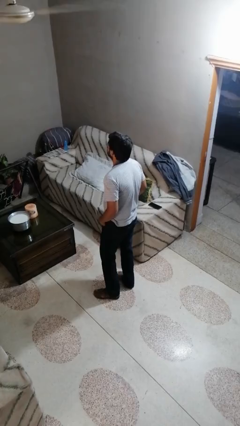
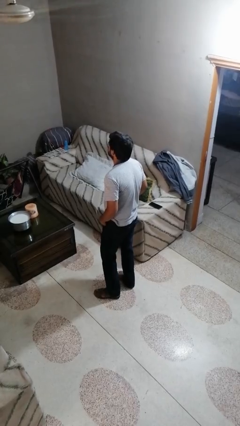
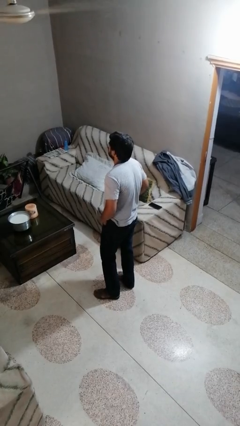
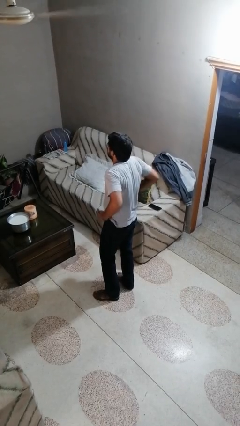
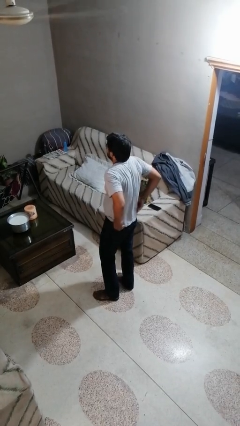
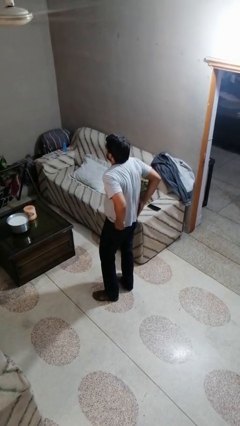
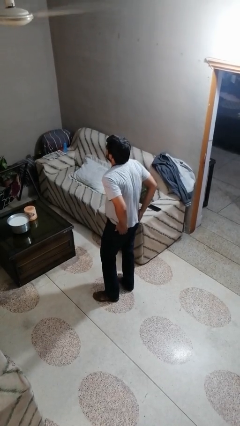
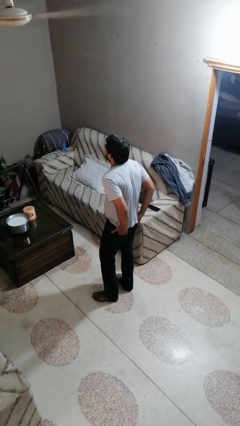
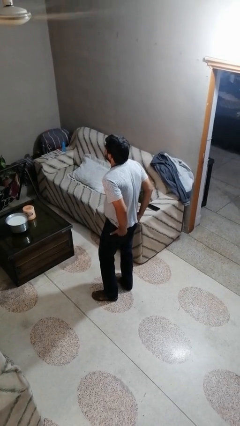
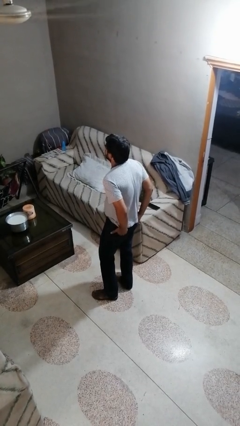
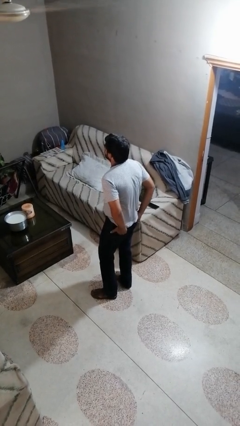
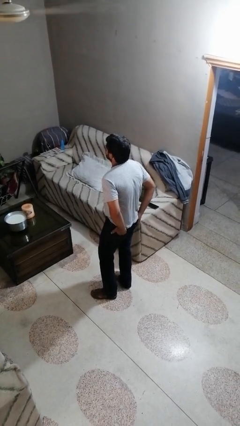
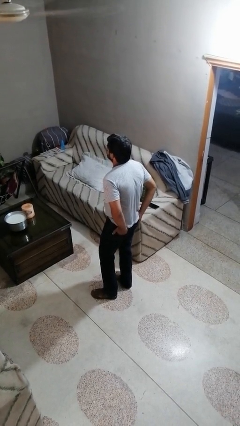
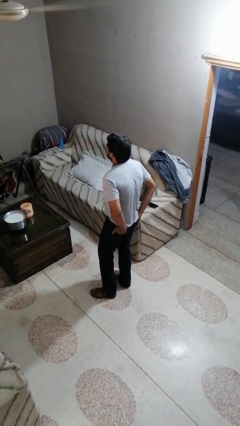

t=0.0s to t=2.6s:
person puts hands in back pockets

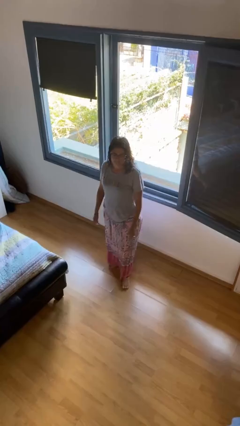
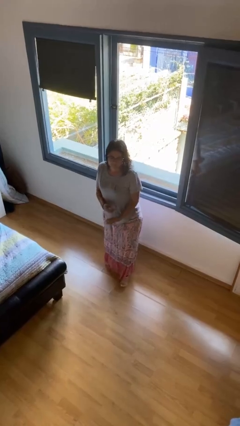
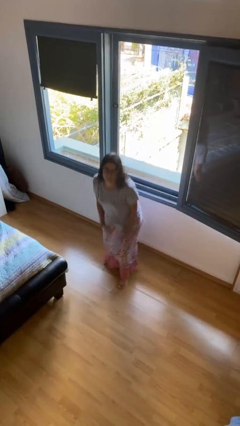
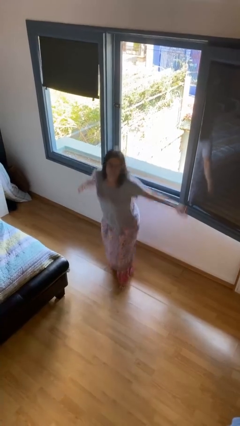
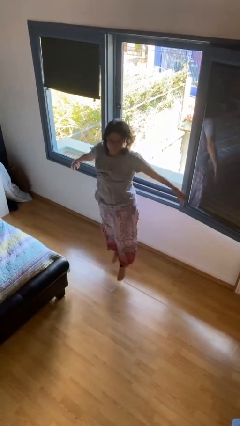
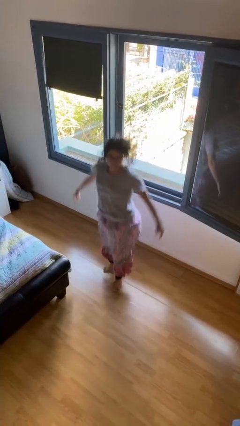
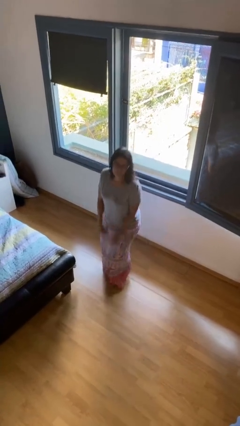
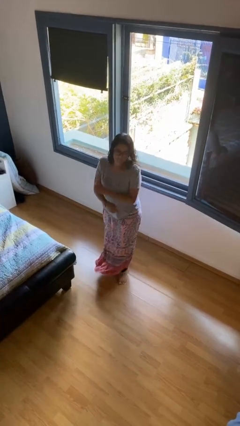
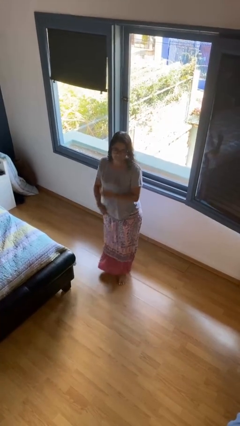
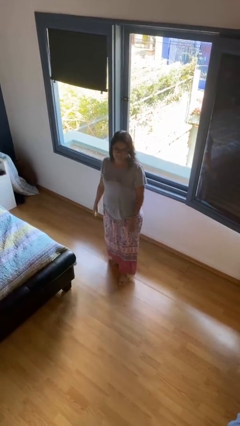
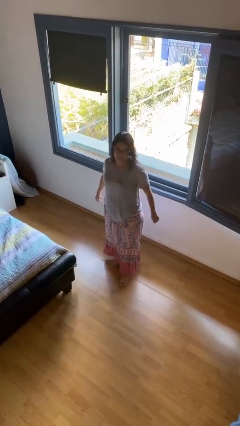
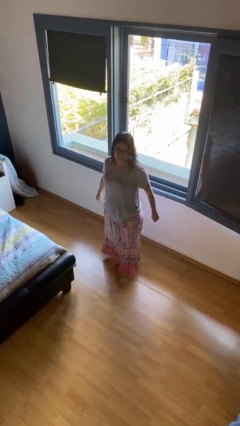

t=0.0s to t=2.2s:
person jumps

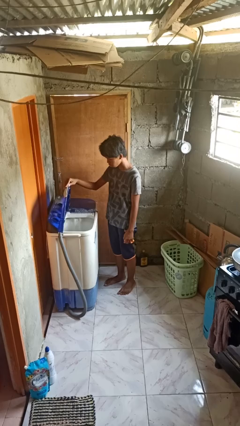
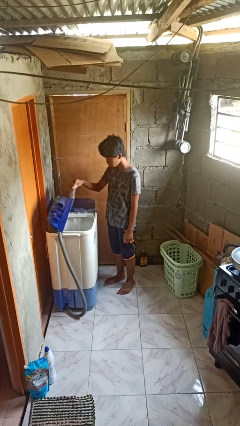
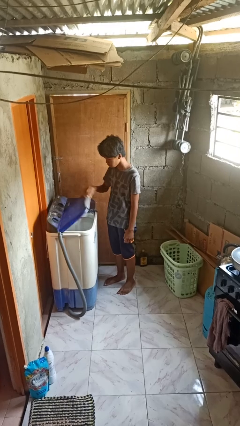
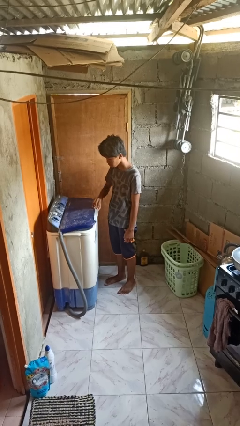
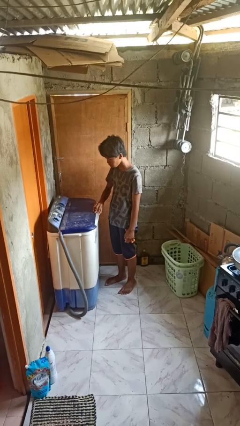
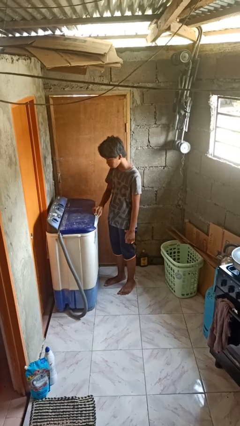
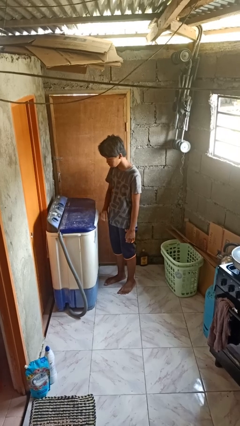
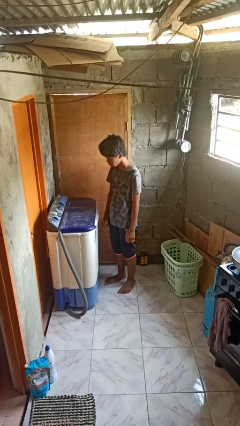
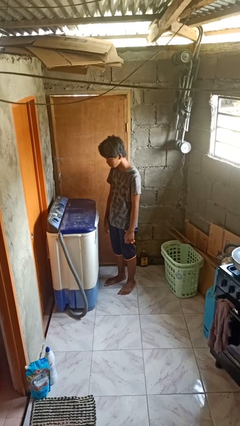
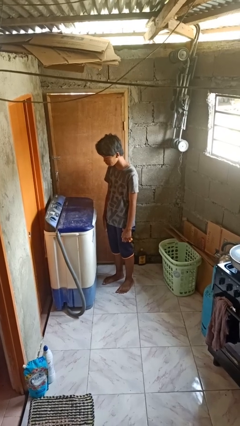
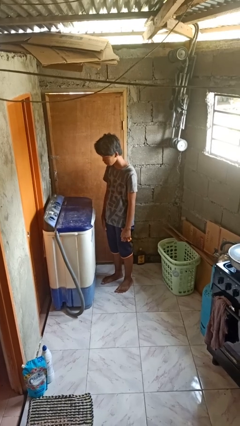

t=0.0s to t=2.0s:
person closes clothes washer

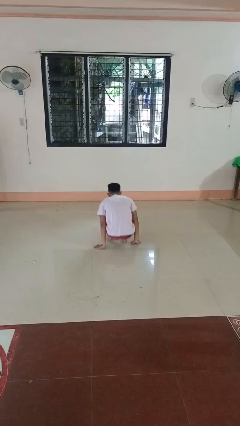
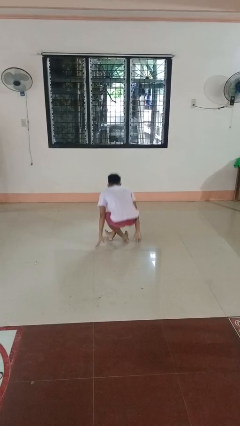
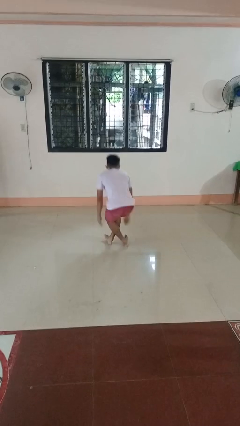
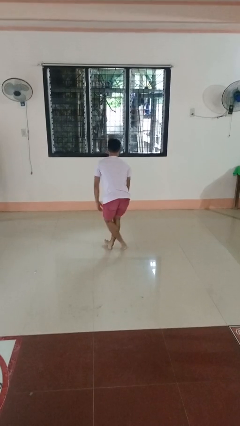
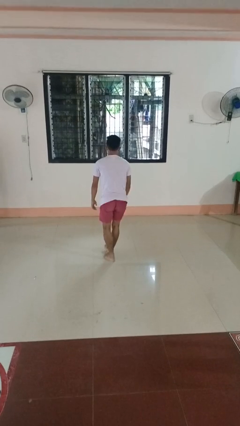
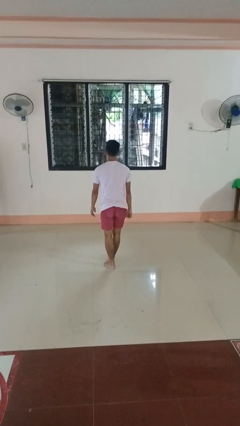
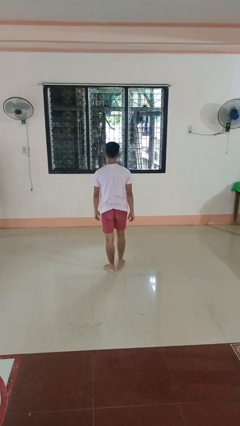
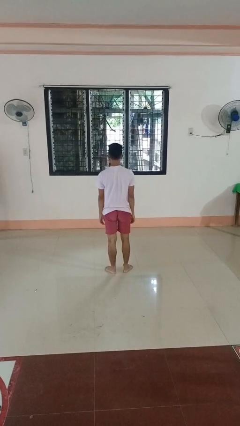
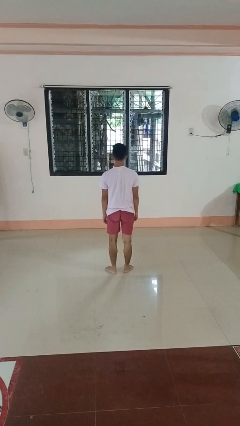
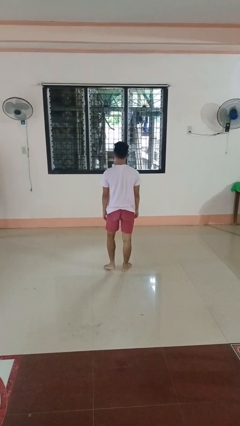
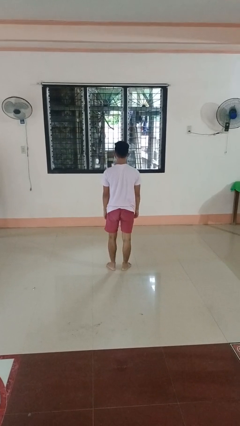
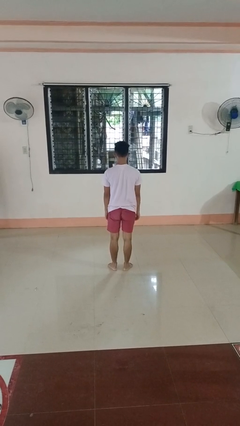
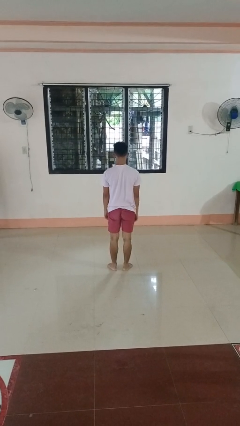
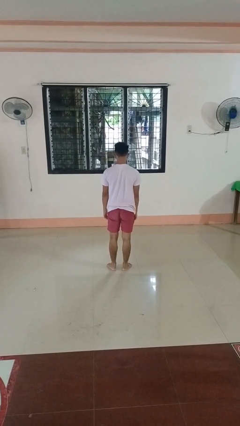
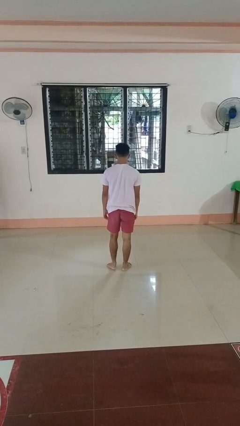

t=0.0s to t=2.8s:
person stands up from floor

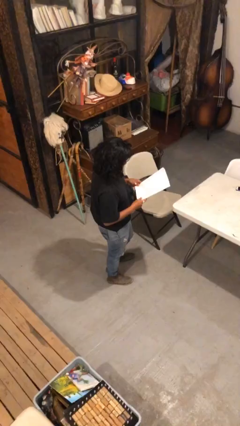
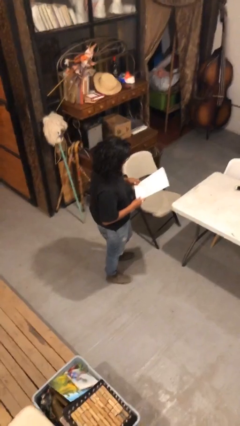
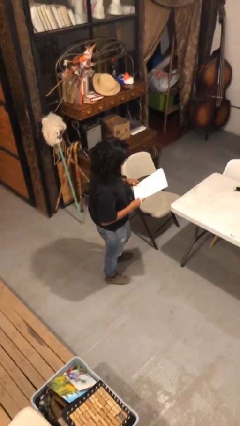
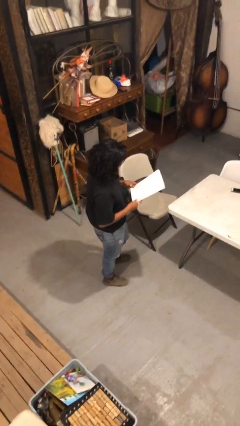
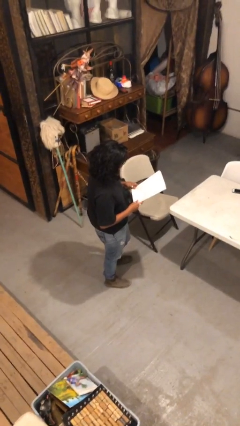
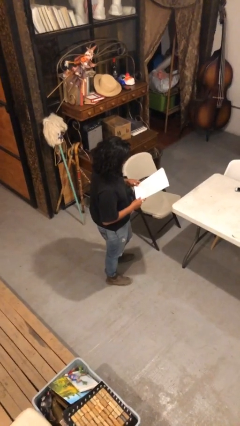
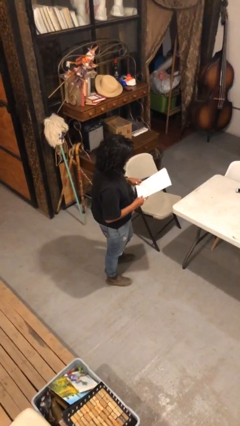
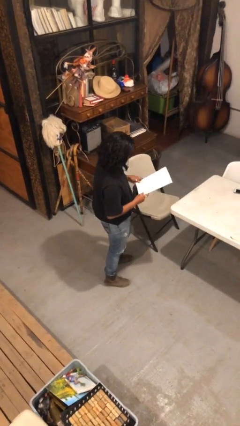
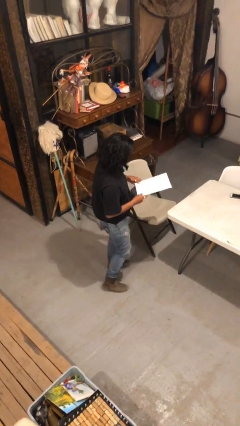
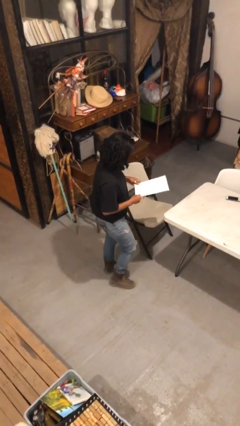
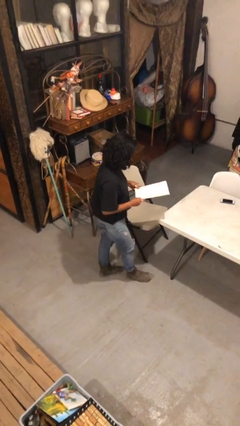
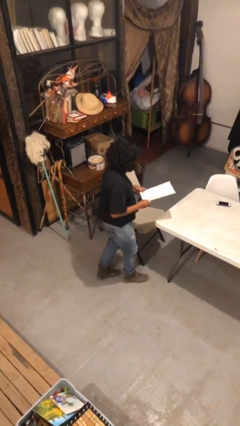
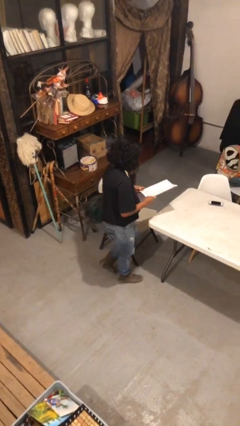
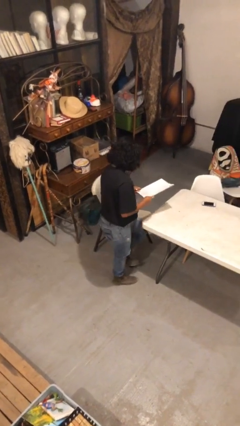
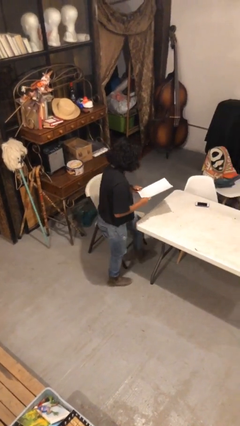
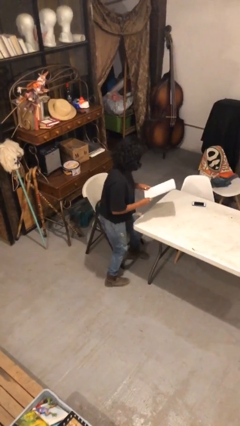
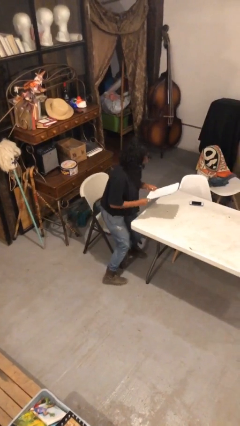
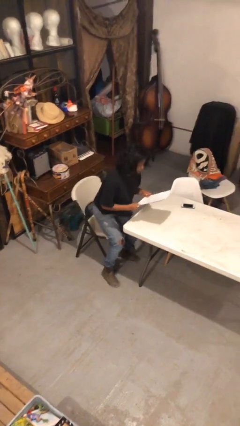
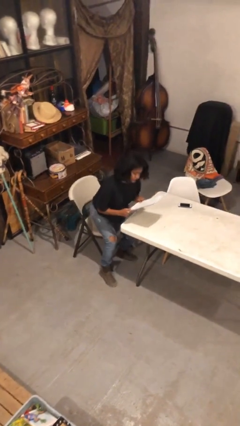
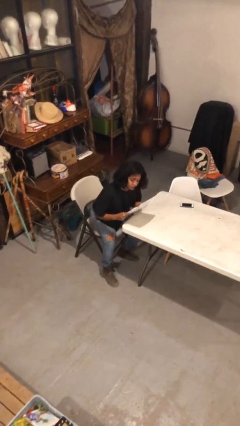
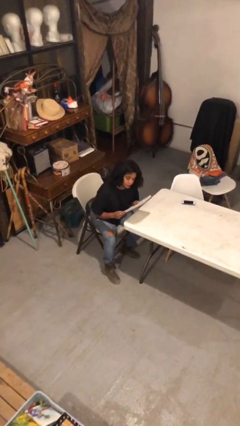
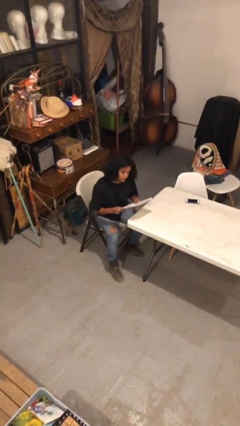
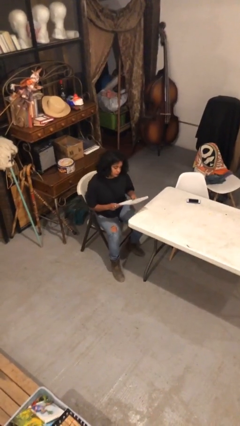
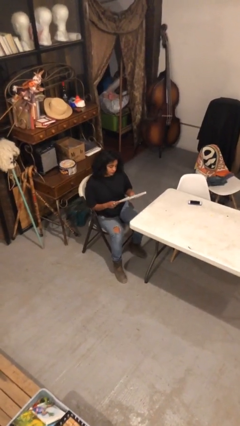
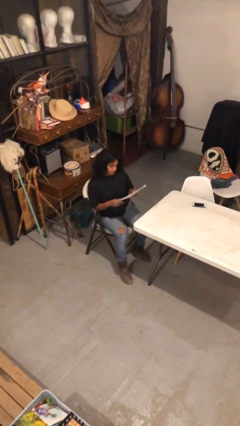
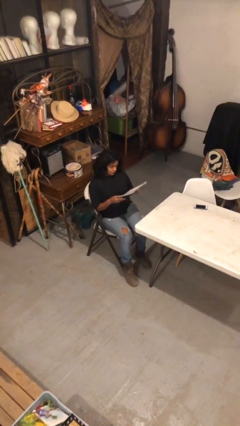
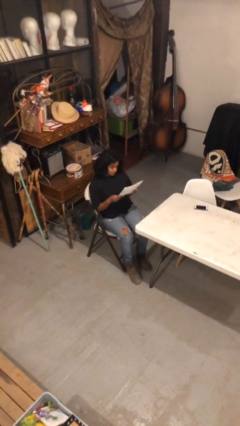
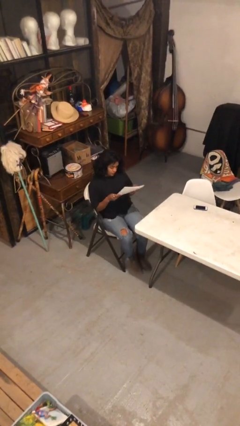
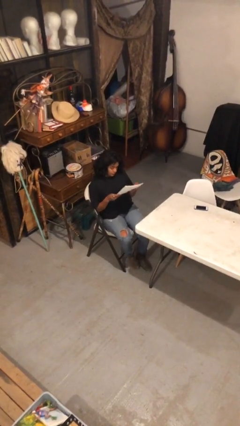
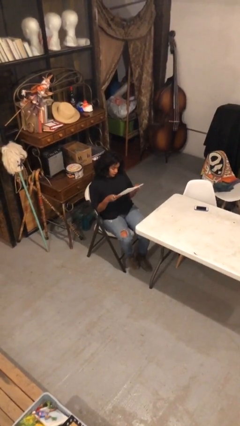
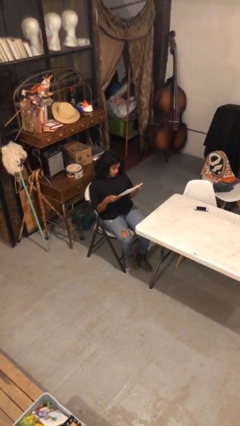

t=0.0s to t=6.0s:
person sits down

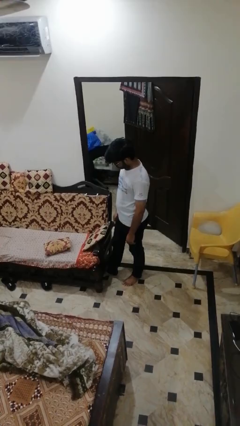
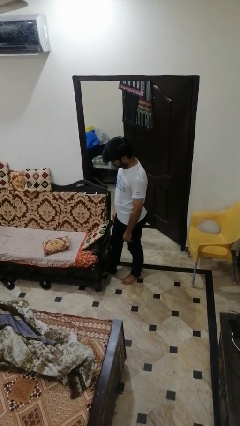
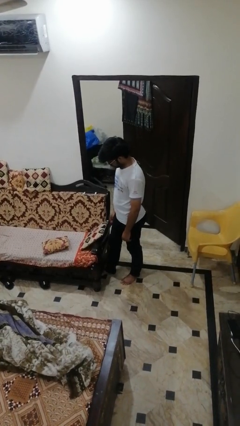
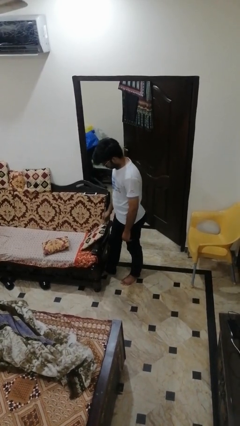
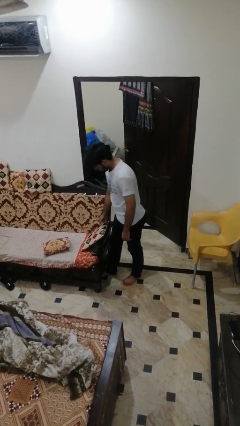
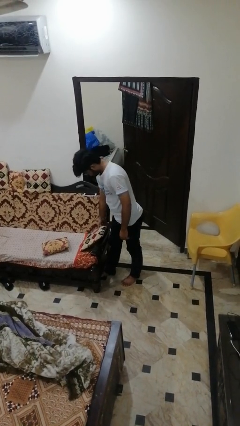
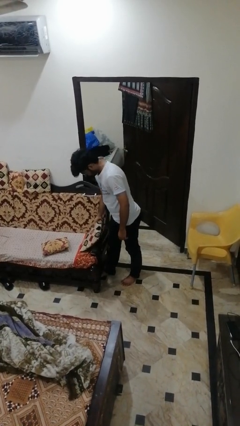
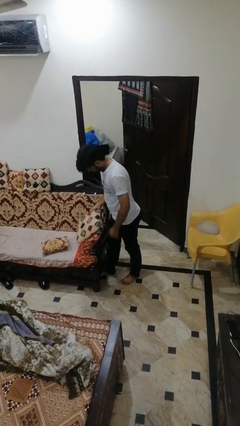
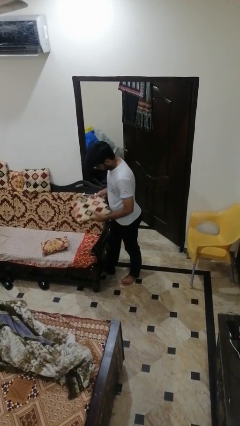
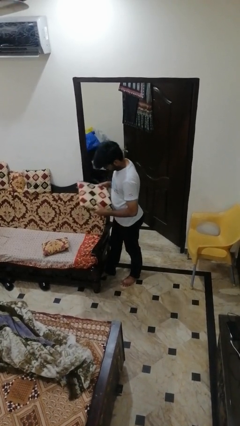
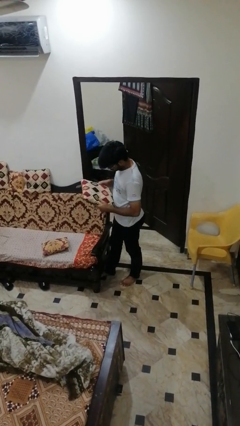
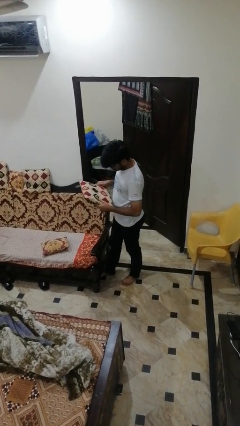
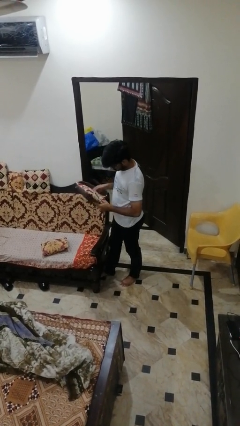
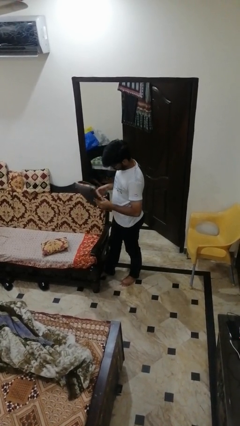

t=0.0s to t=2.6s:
person picks up object from couch
